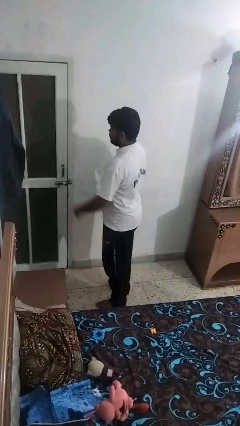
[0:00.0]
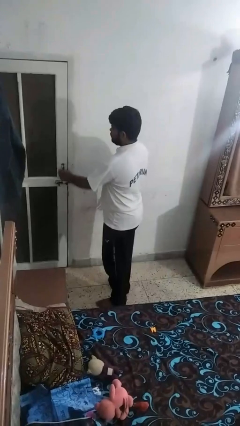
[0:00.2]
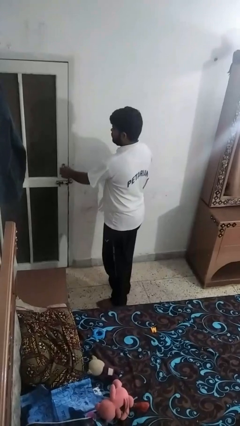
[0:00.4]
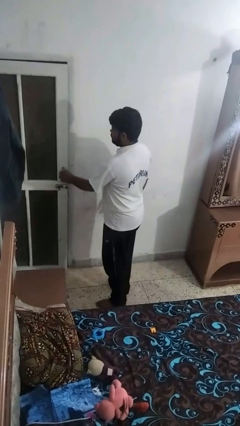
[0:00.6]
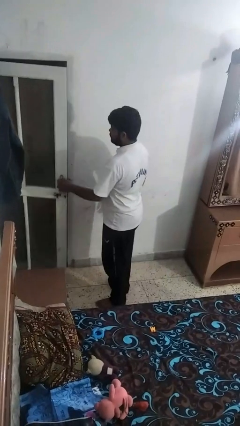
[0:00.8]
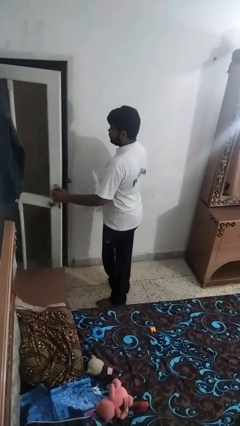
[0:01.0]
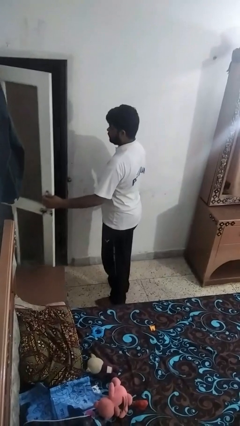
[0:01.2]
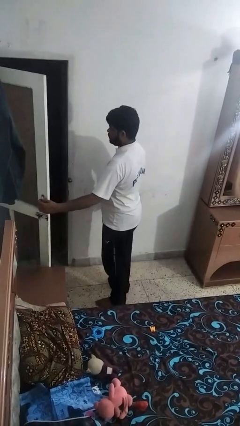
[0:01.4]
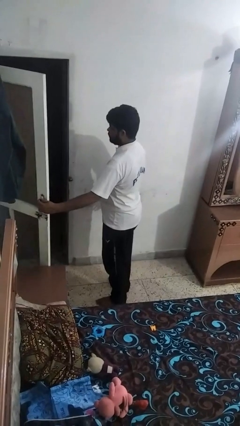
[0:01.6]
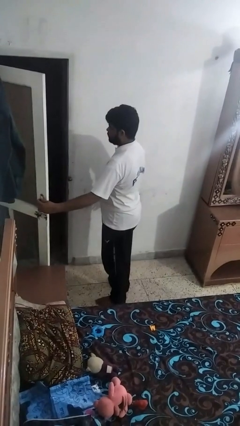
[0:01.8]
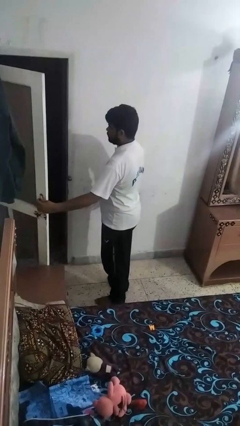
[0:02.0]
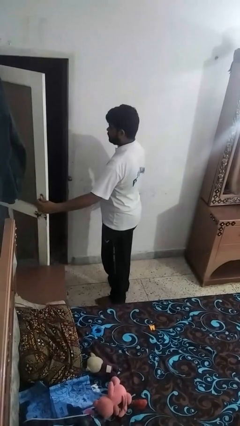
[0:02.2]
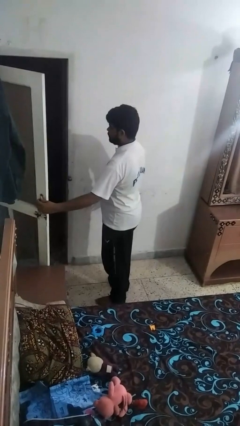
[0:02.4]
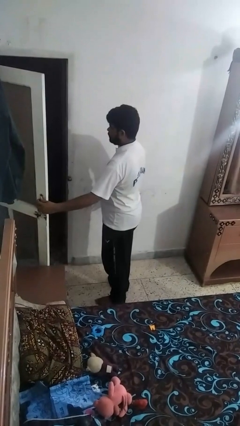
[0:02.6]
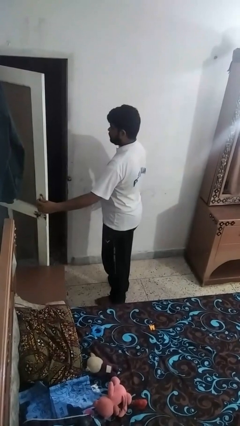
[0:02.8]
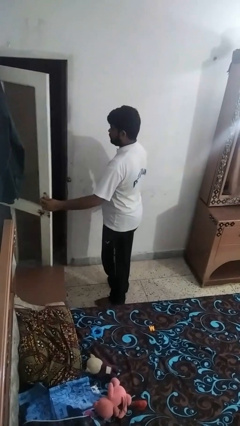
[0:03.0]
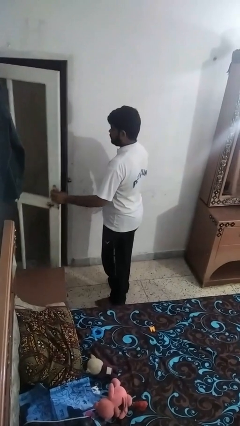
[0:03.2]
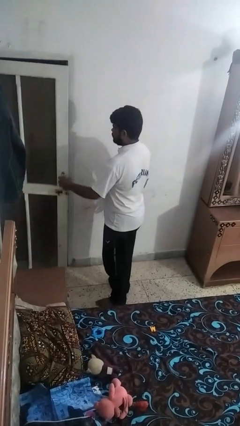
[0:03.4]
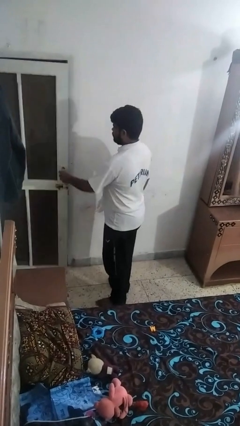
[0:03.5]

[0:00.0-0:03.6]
person opens gate

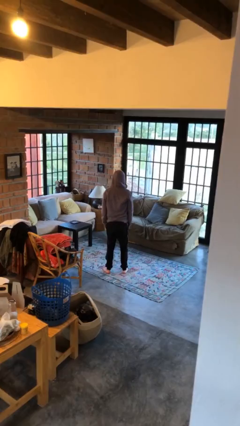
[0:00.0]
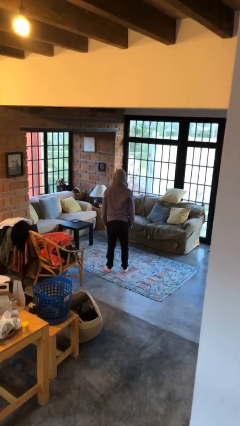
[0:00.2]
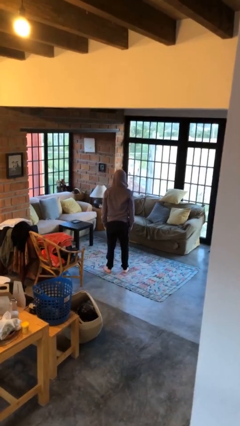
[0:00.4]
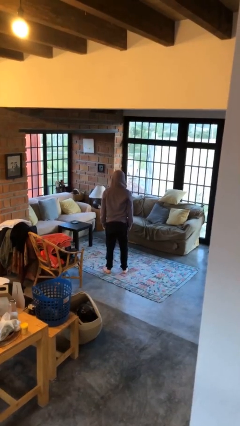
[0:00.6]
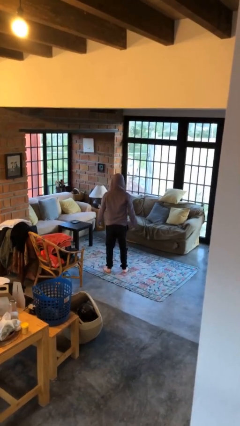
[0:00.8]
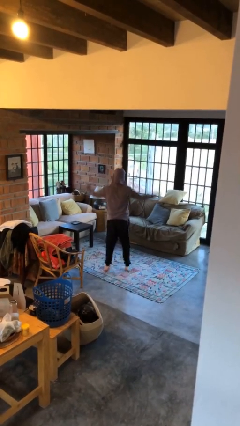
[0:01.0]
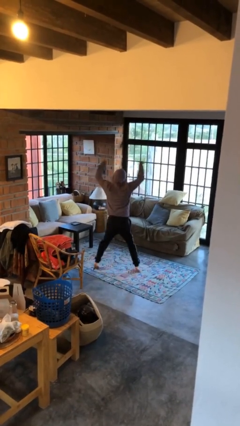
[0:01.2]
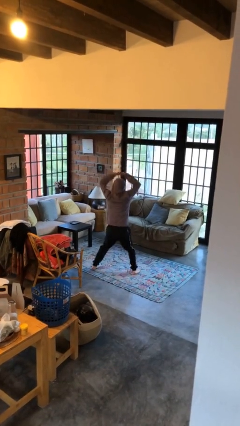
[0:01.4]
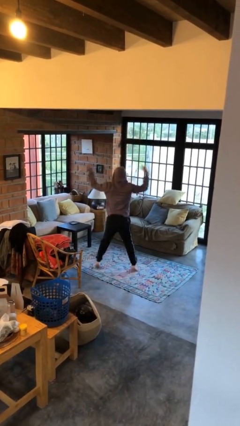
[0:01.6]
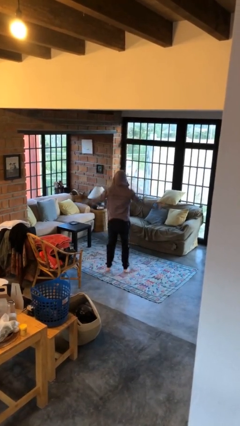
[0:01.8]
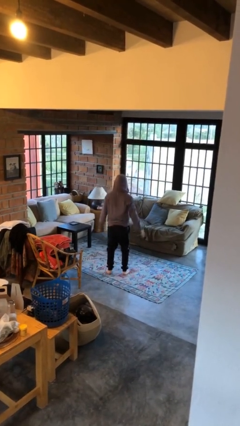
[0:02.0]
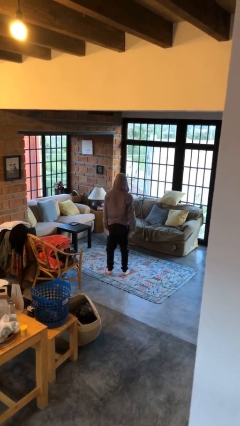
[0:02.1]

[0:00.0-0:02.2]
person exercises with jumping jacks

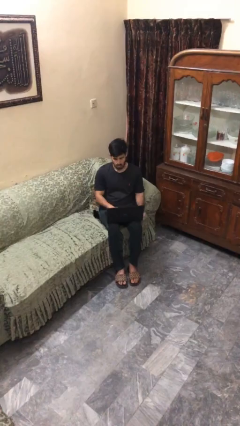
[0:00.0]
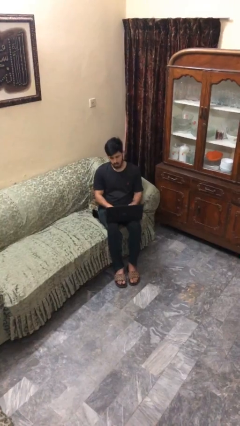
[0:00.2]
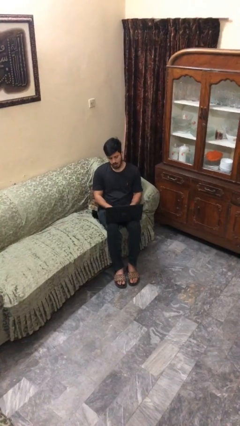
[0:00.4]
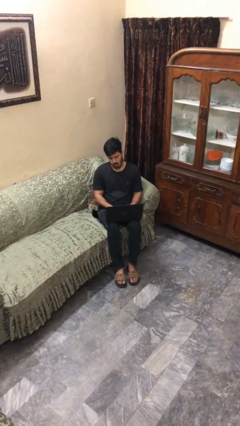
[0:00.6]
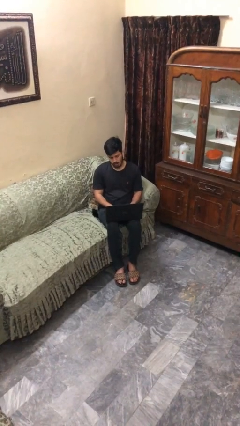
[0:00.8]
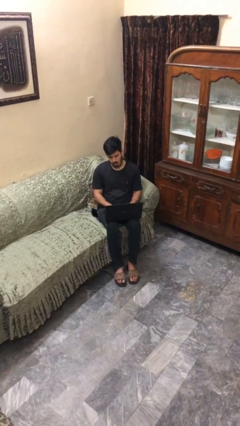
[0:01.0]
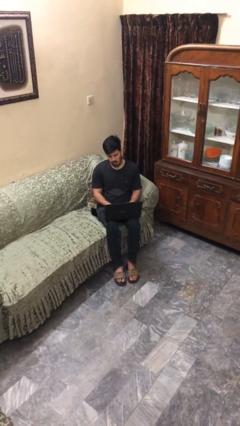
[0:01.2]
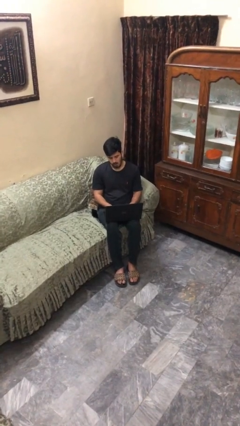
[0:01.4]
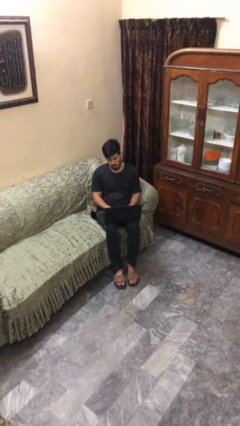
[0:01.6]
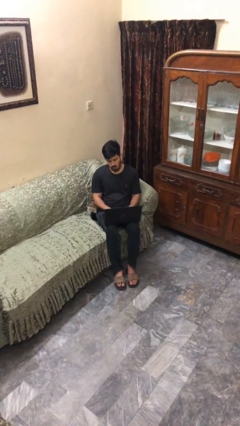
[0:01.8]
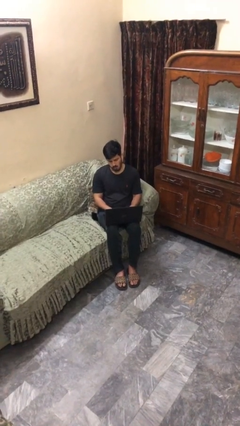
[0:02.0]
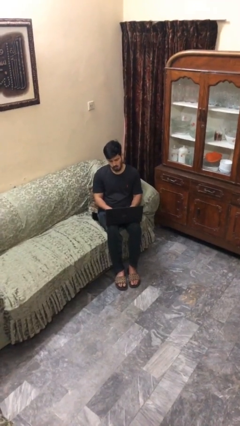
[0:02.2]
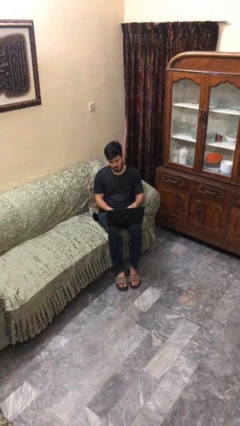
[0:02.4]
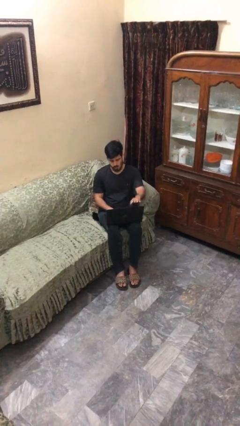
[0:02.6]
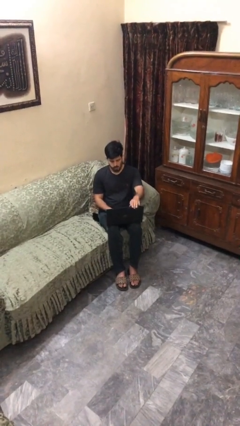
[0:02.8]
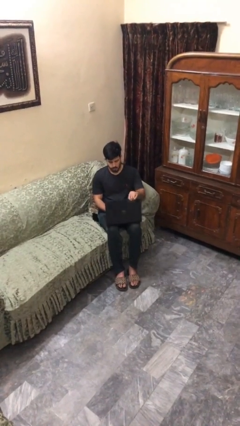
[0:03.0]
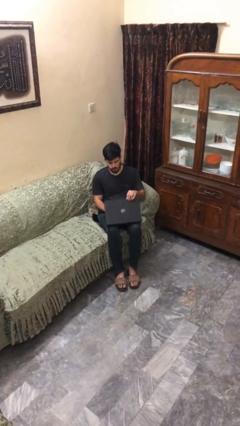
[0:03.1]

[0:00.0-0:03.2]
person interacts with laptop

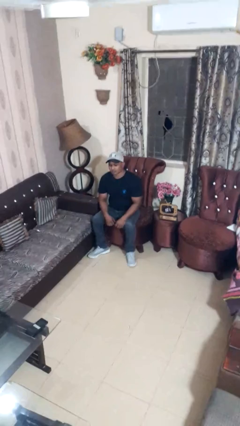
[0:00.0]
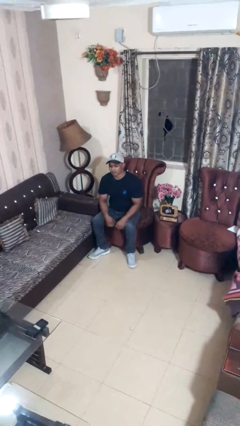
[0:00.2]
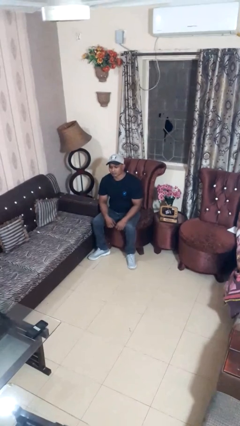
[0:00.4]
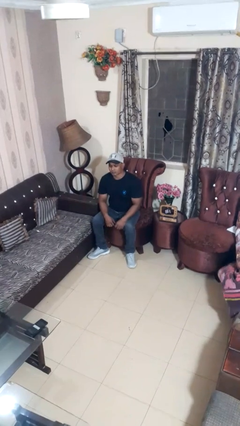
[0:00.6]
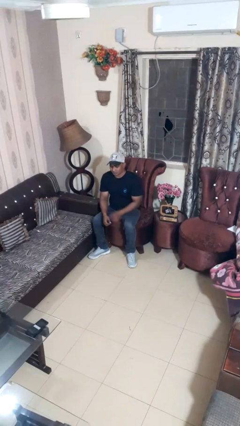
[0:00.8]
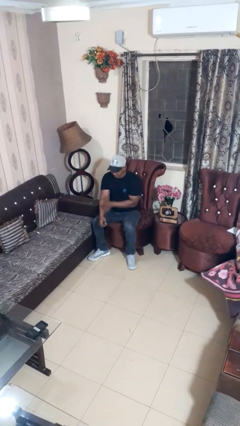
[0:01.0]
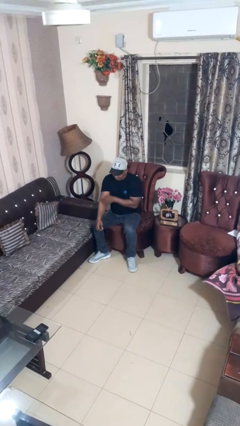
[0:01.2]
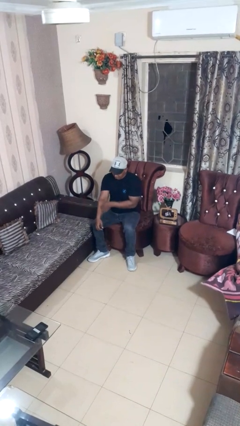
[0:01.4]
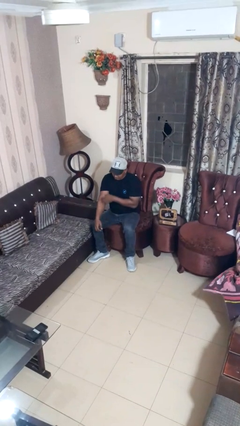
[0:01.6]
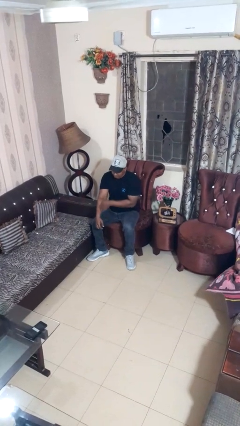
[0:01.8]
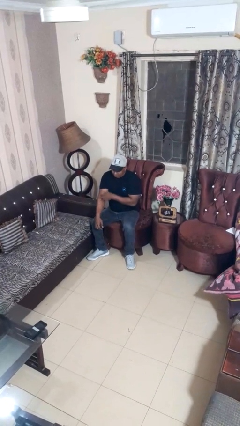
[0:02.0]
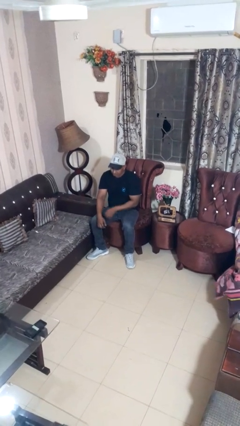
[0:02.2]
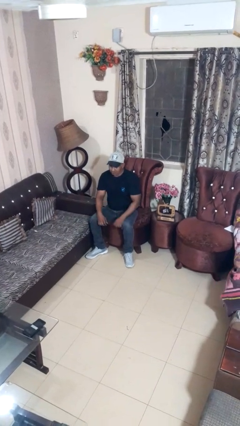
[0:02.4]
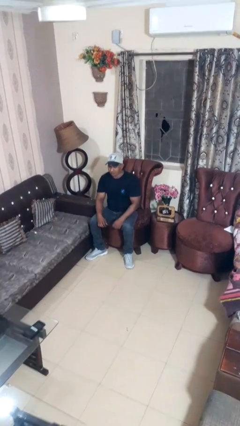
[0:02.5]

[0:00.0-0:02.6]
person scratches face

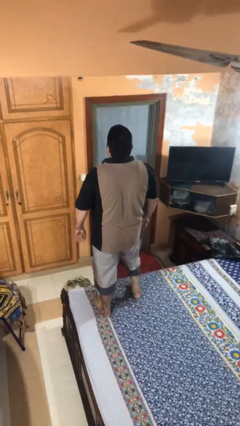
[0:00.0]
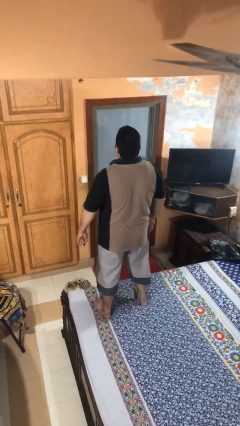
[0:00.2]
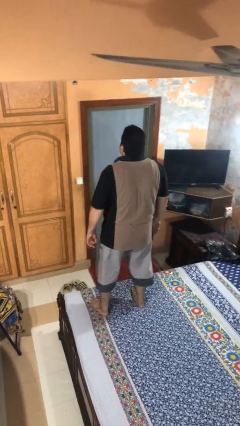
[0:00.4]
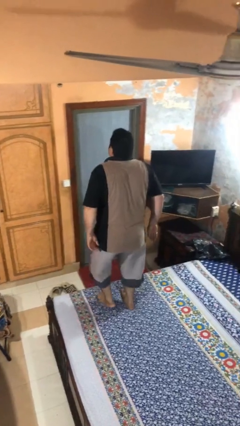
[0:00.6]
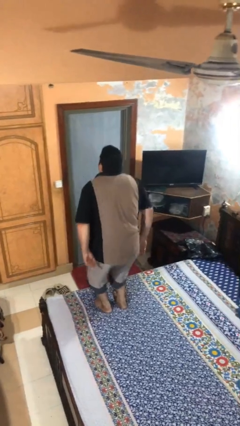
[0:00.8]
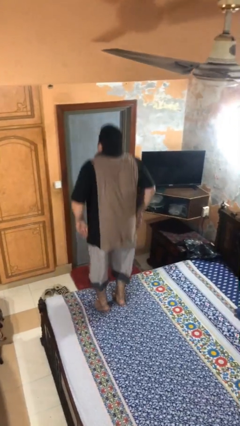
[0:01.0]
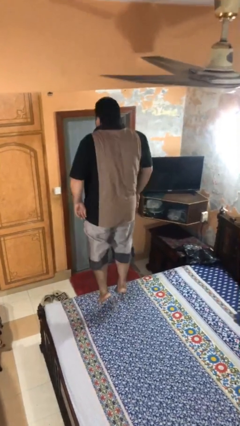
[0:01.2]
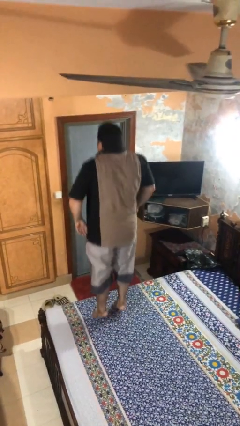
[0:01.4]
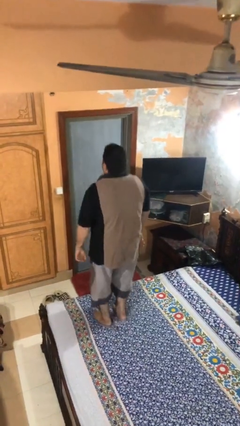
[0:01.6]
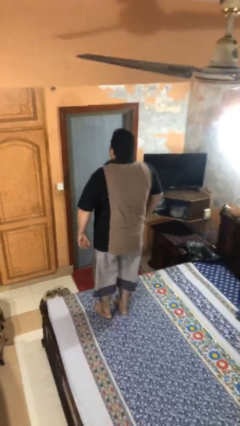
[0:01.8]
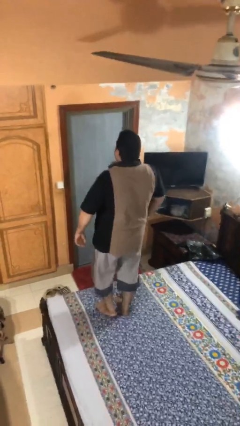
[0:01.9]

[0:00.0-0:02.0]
person jumps on bed

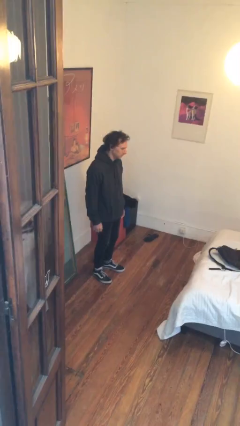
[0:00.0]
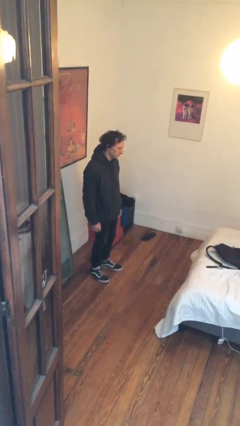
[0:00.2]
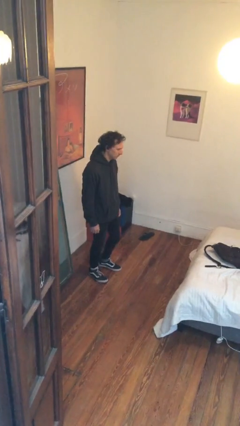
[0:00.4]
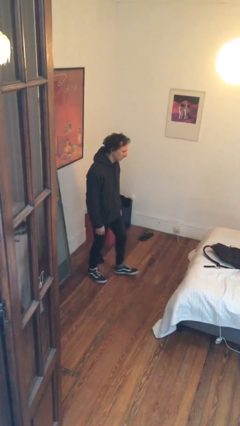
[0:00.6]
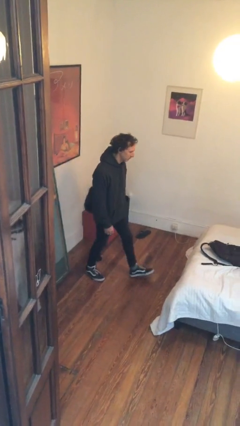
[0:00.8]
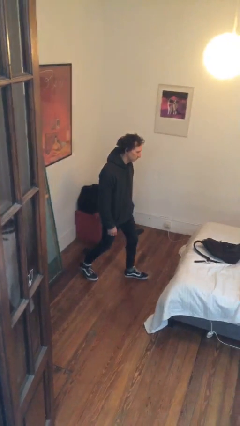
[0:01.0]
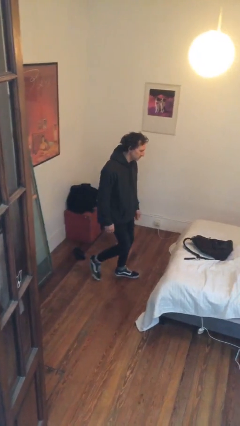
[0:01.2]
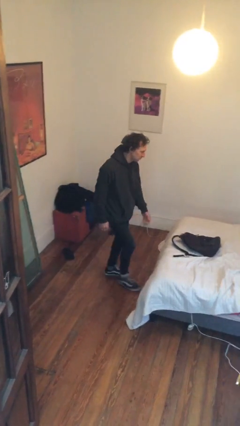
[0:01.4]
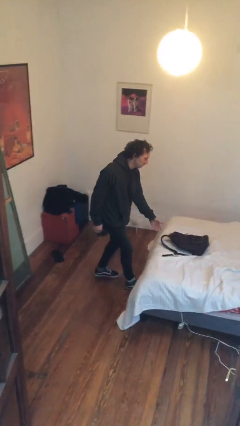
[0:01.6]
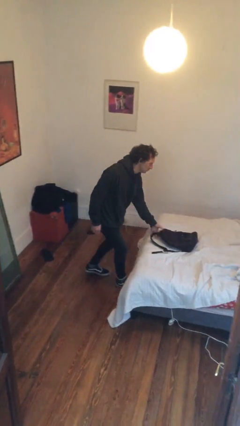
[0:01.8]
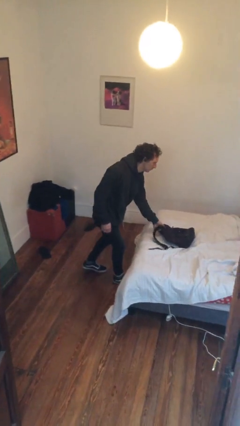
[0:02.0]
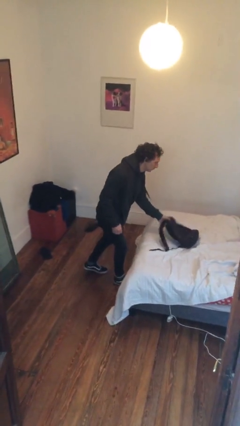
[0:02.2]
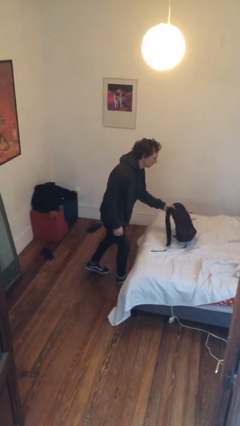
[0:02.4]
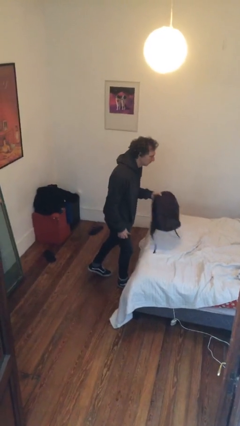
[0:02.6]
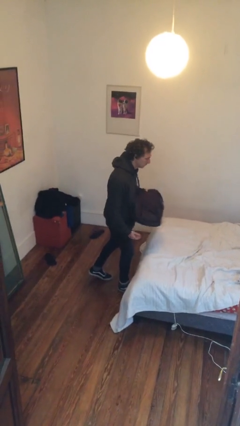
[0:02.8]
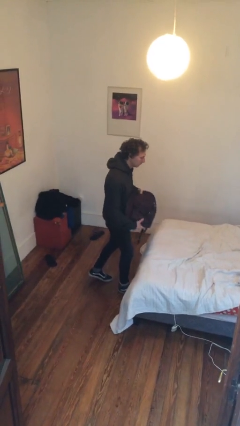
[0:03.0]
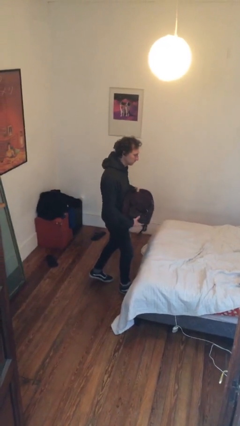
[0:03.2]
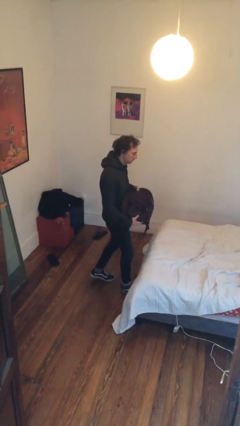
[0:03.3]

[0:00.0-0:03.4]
person picks up object from bed

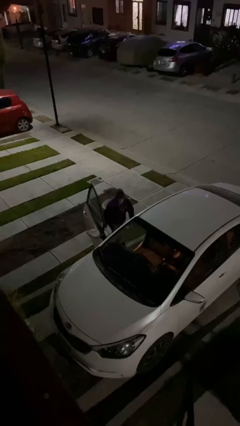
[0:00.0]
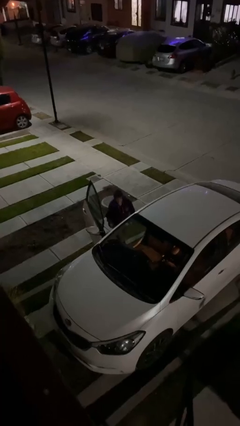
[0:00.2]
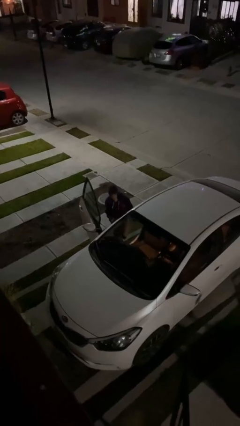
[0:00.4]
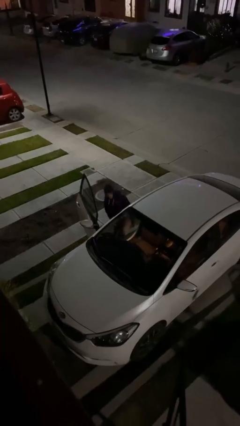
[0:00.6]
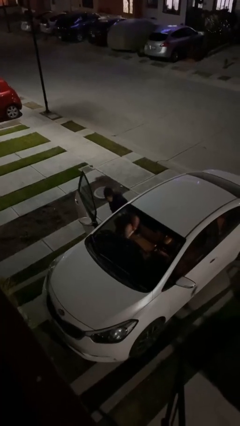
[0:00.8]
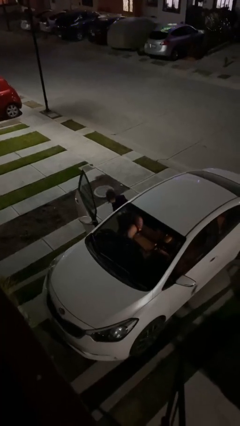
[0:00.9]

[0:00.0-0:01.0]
person enters car
